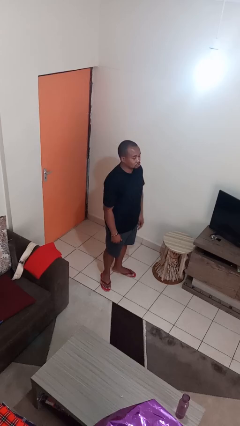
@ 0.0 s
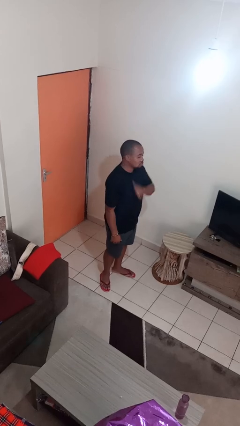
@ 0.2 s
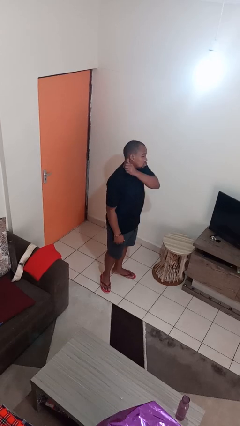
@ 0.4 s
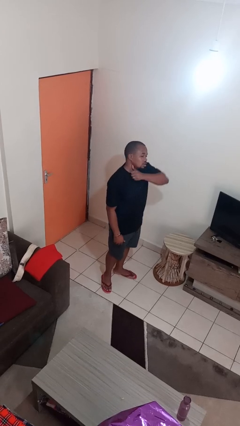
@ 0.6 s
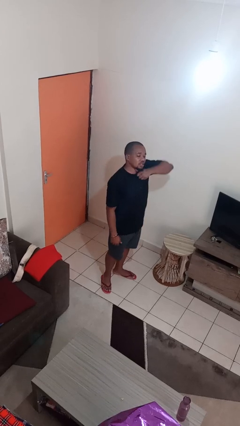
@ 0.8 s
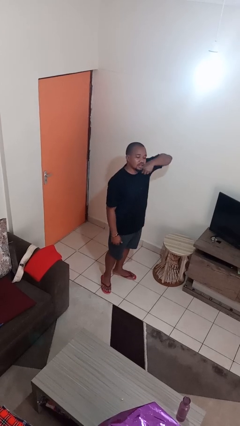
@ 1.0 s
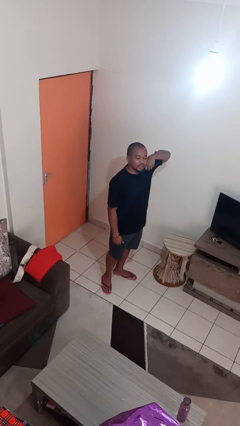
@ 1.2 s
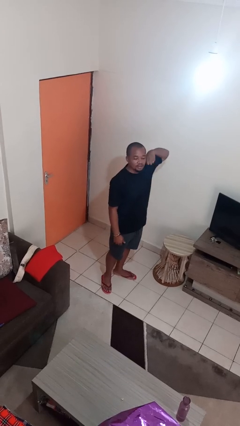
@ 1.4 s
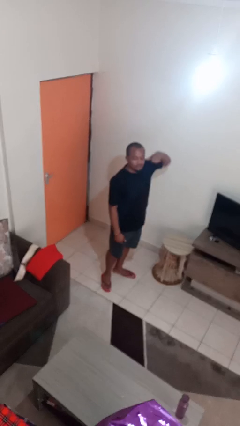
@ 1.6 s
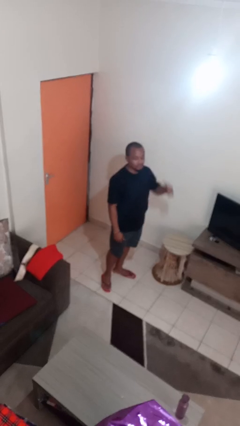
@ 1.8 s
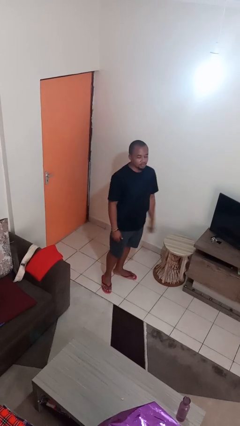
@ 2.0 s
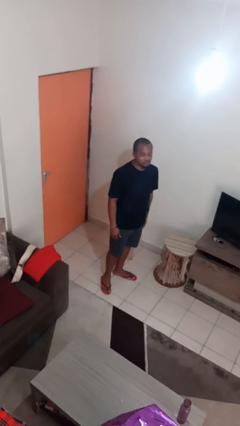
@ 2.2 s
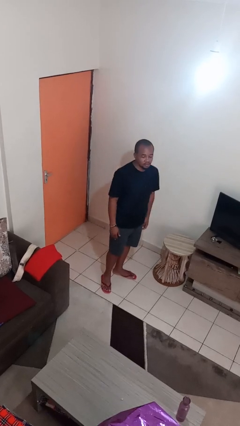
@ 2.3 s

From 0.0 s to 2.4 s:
person gestures cut

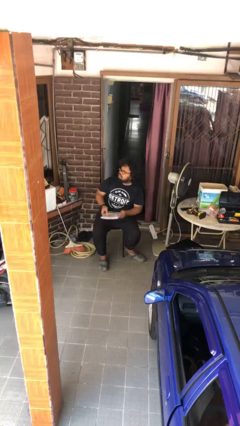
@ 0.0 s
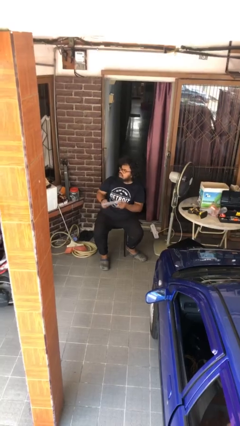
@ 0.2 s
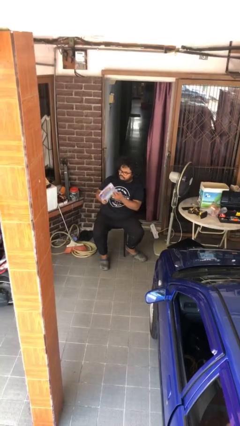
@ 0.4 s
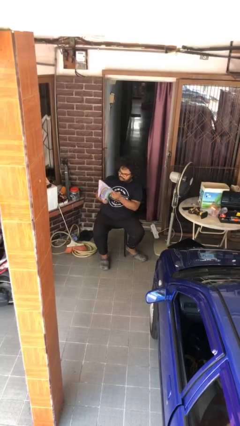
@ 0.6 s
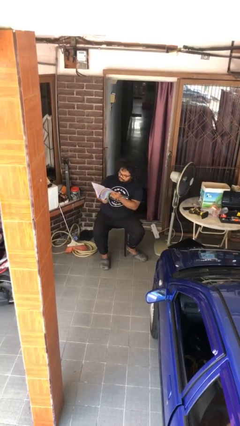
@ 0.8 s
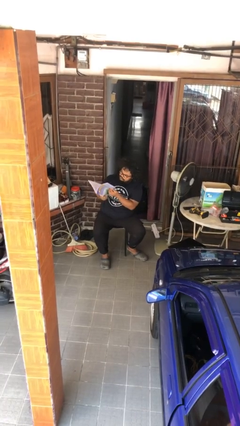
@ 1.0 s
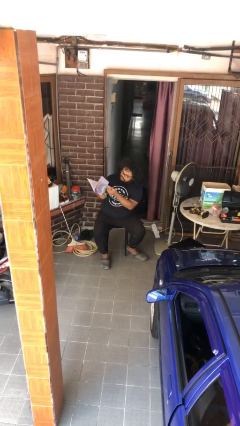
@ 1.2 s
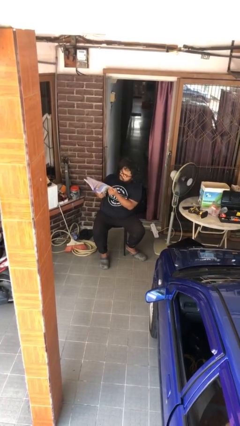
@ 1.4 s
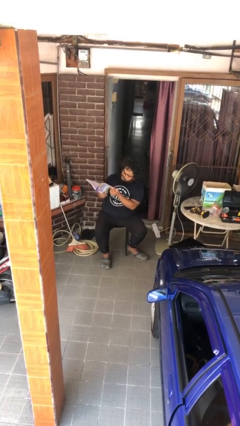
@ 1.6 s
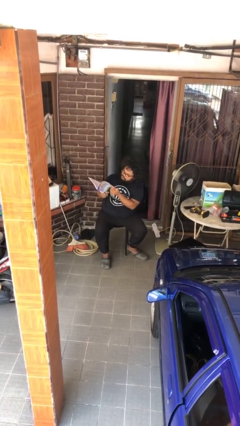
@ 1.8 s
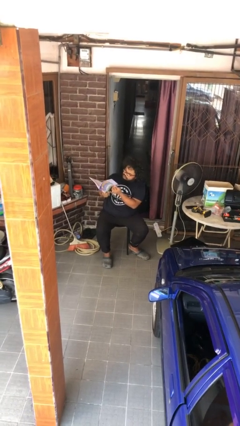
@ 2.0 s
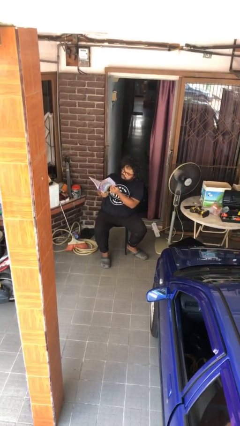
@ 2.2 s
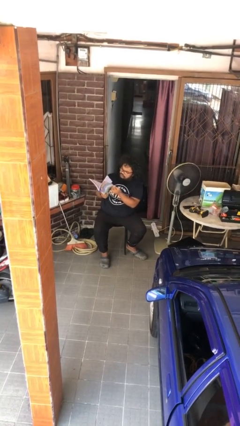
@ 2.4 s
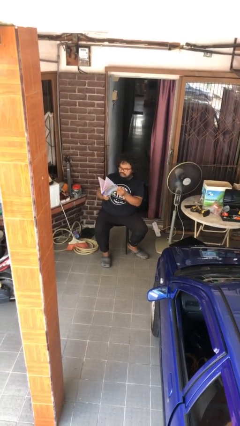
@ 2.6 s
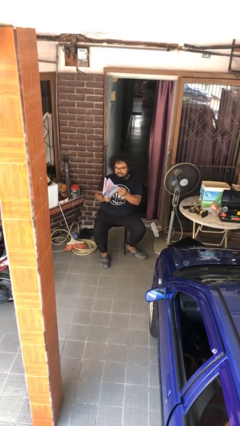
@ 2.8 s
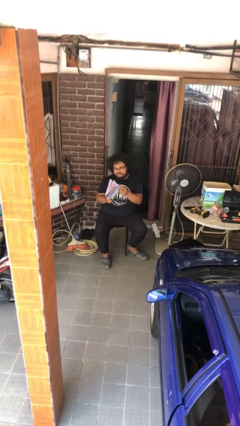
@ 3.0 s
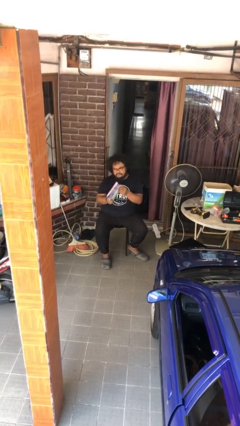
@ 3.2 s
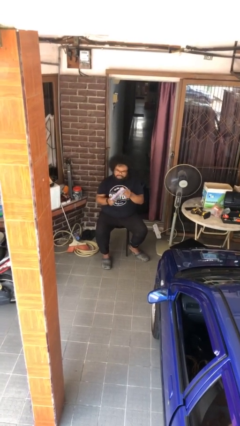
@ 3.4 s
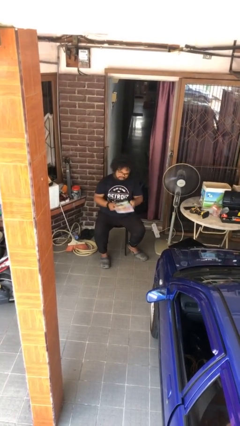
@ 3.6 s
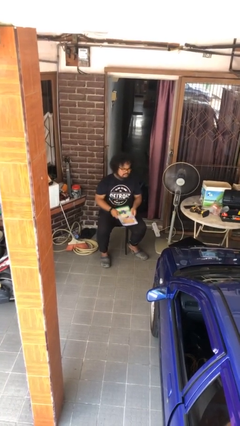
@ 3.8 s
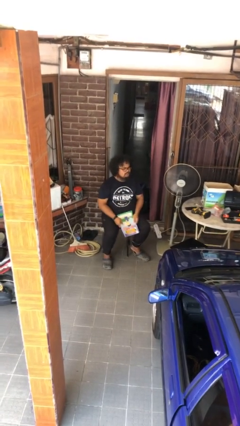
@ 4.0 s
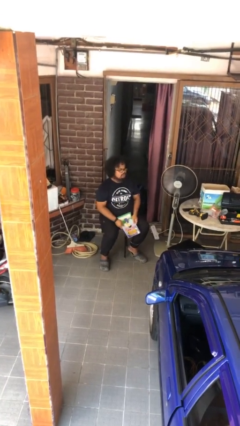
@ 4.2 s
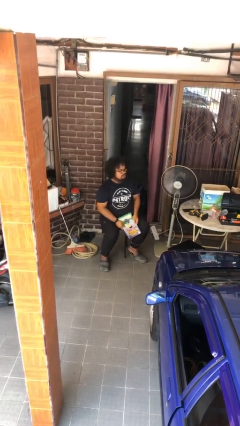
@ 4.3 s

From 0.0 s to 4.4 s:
person reads document

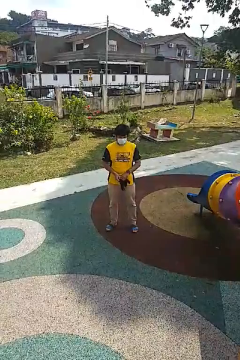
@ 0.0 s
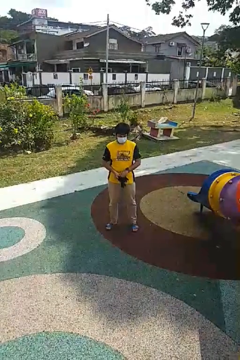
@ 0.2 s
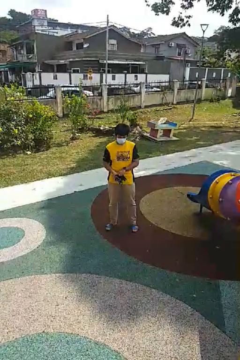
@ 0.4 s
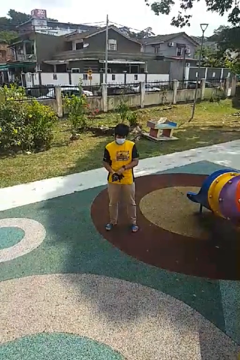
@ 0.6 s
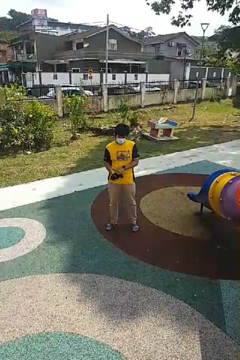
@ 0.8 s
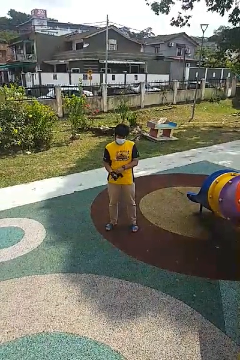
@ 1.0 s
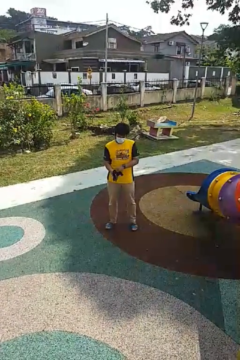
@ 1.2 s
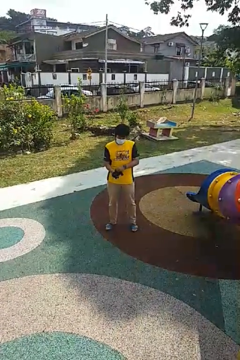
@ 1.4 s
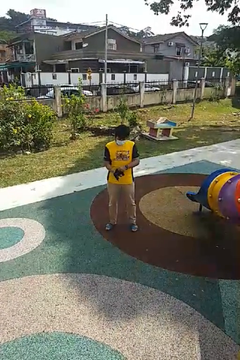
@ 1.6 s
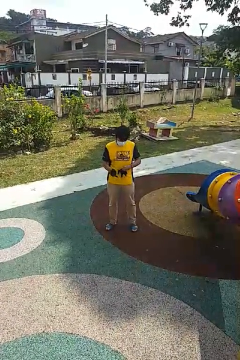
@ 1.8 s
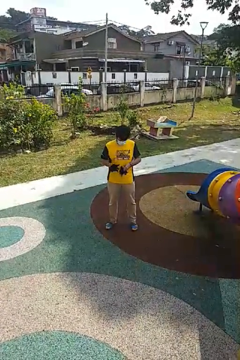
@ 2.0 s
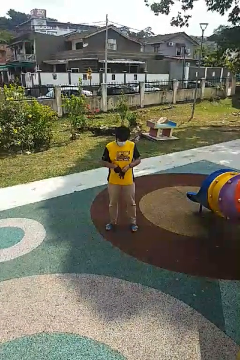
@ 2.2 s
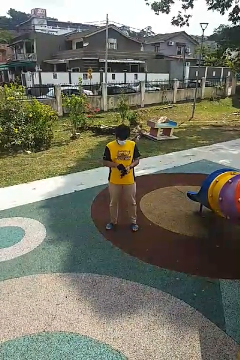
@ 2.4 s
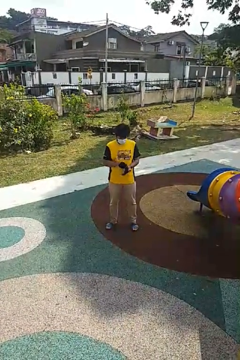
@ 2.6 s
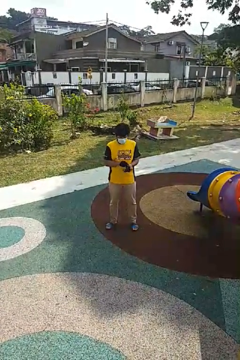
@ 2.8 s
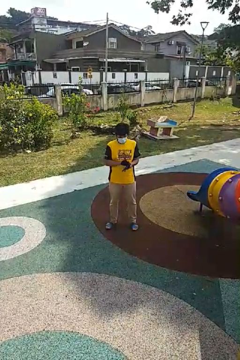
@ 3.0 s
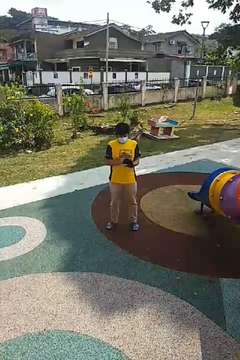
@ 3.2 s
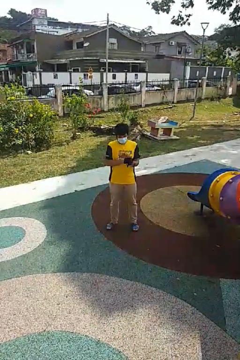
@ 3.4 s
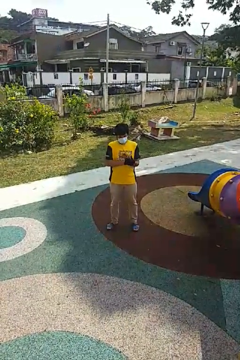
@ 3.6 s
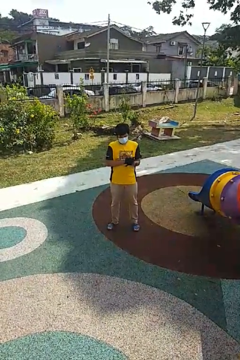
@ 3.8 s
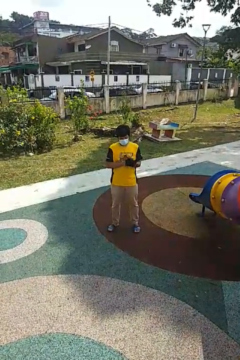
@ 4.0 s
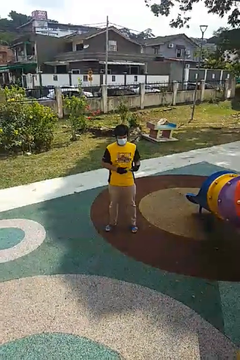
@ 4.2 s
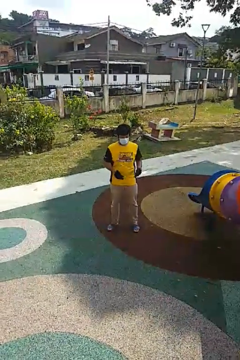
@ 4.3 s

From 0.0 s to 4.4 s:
person puts on gloves

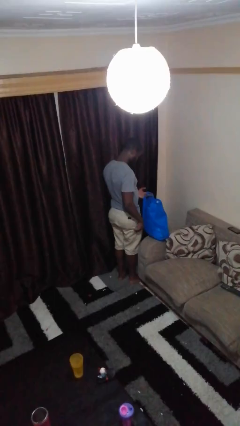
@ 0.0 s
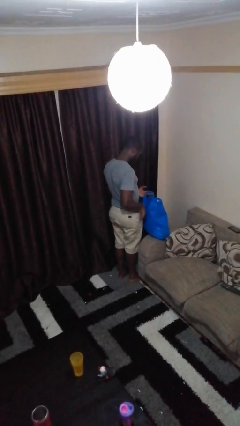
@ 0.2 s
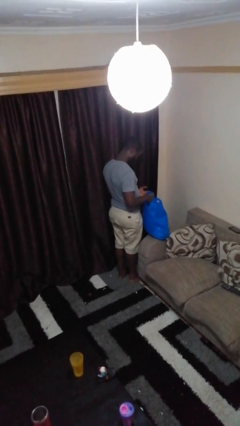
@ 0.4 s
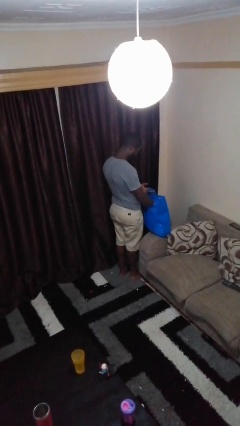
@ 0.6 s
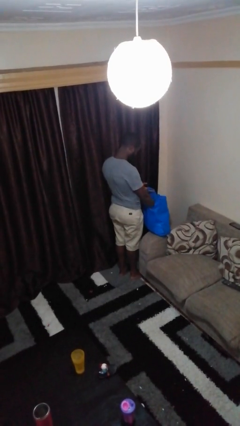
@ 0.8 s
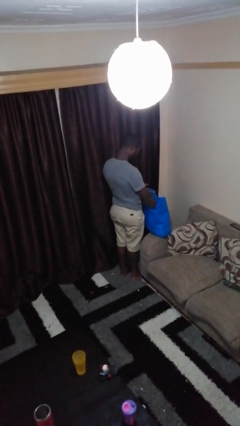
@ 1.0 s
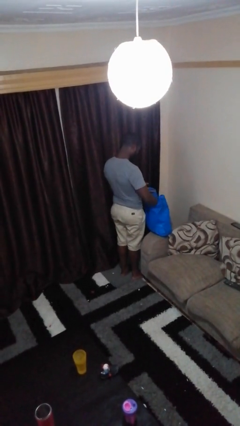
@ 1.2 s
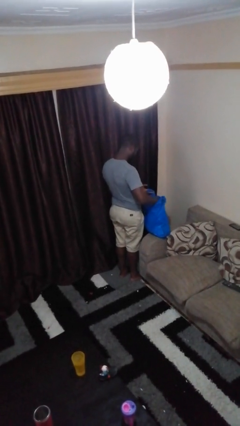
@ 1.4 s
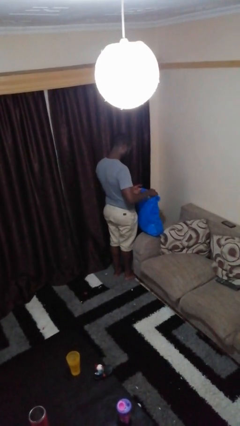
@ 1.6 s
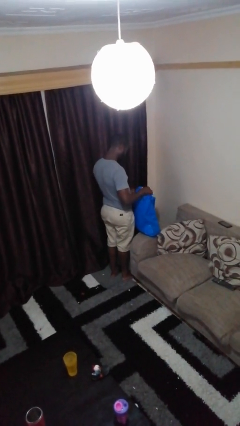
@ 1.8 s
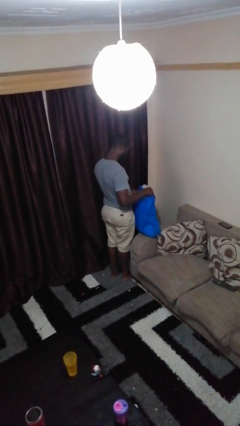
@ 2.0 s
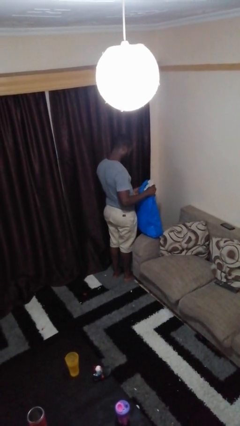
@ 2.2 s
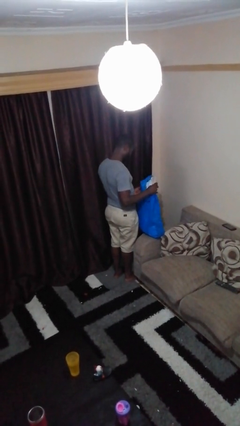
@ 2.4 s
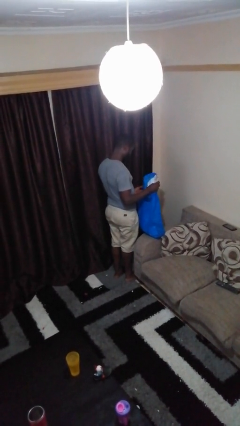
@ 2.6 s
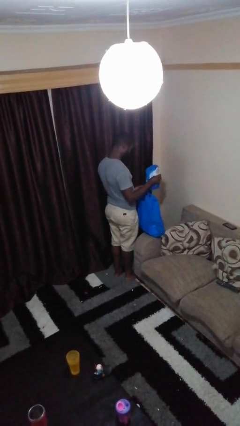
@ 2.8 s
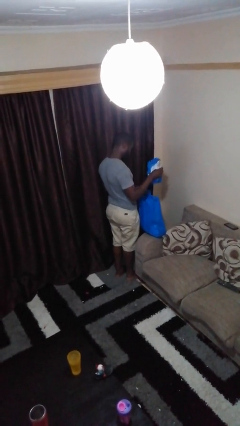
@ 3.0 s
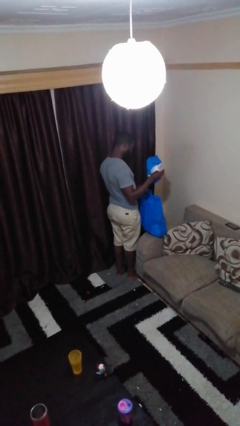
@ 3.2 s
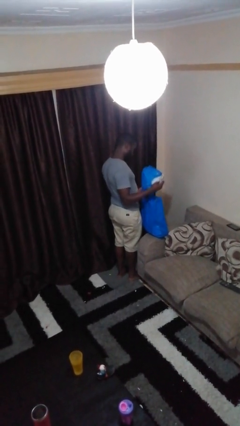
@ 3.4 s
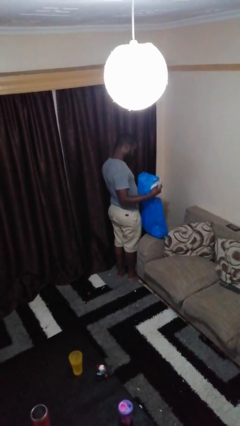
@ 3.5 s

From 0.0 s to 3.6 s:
person takes object from bag

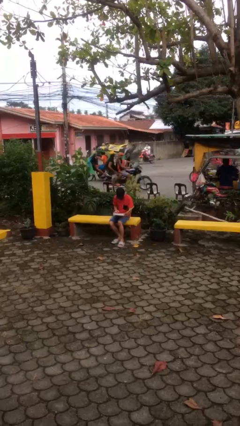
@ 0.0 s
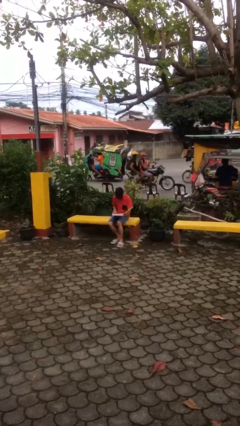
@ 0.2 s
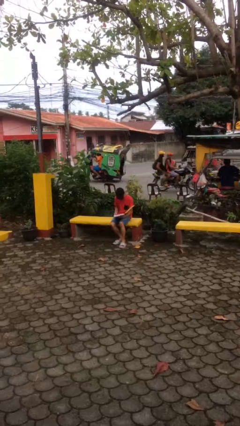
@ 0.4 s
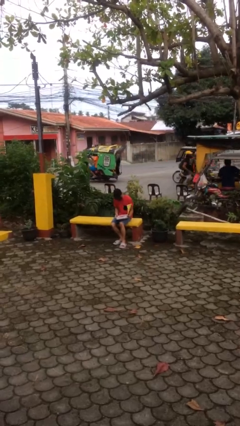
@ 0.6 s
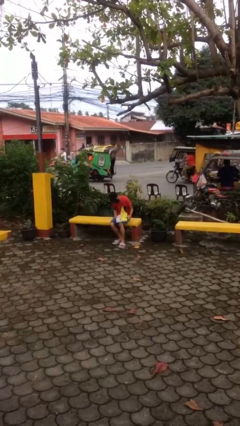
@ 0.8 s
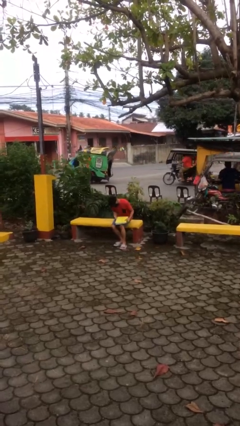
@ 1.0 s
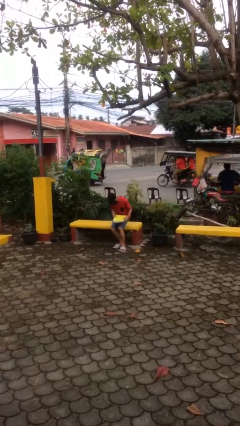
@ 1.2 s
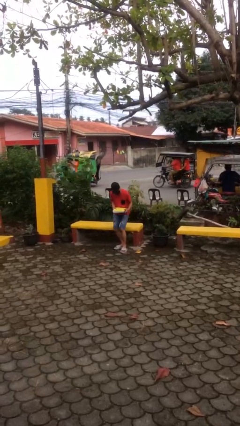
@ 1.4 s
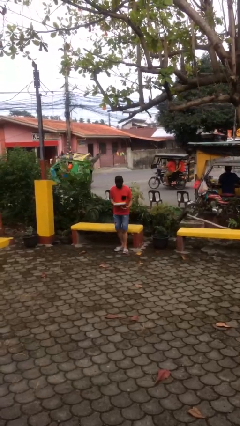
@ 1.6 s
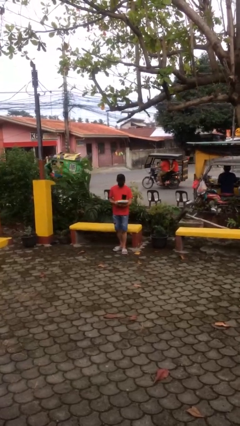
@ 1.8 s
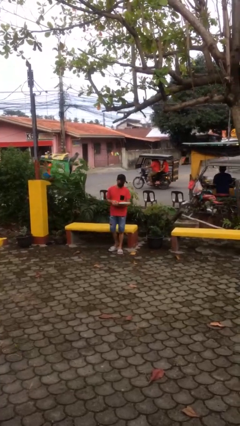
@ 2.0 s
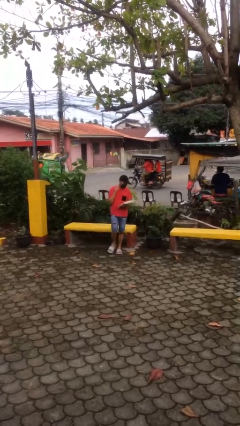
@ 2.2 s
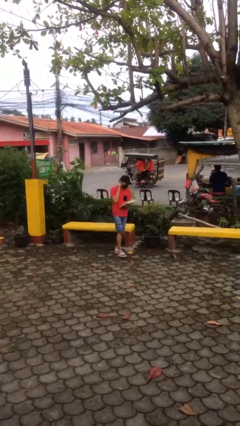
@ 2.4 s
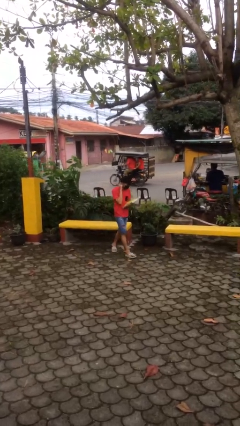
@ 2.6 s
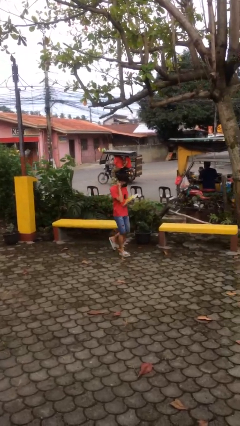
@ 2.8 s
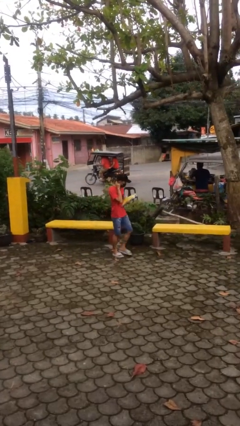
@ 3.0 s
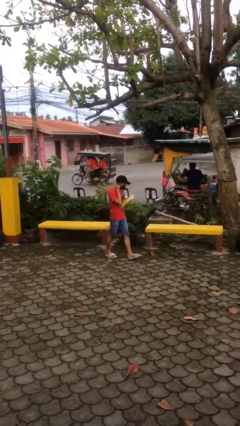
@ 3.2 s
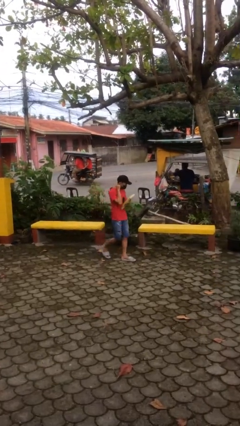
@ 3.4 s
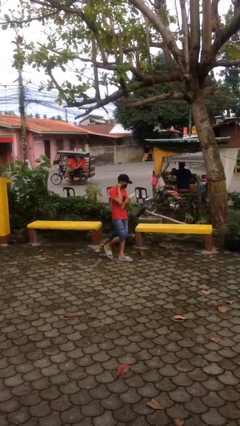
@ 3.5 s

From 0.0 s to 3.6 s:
person stands up
